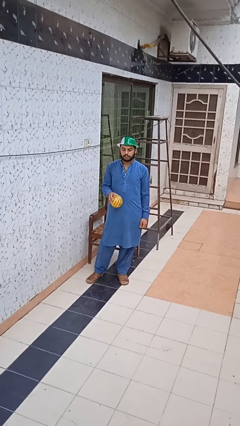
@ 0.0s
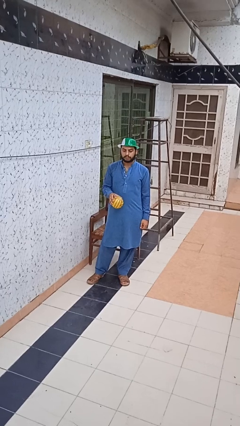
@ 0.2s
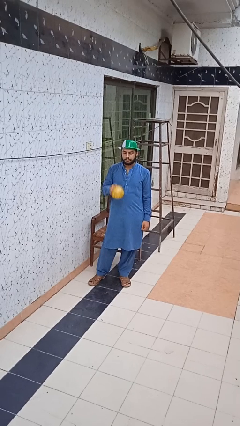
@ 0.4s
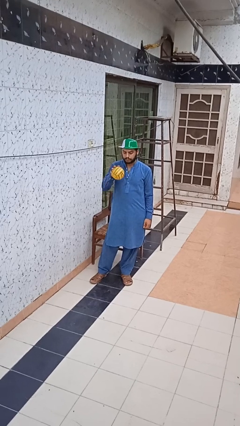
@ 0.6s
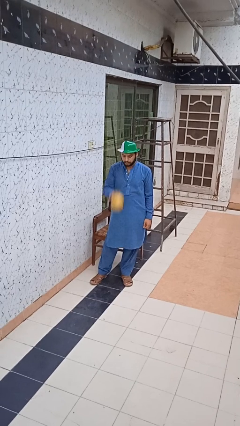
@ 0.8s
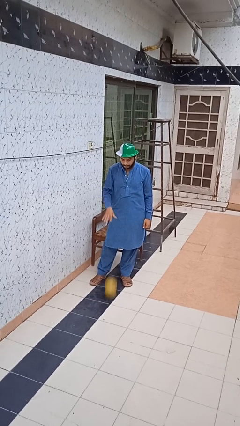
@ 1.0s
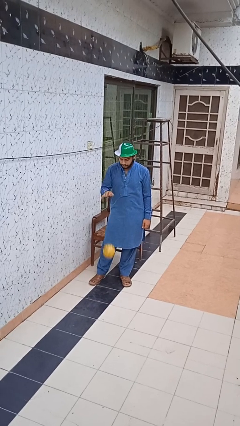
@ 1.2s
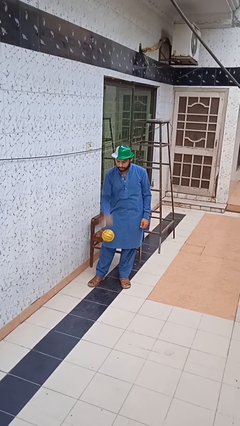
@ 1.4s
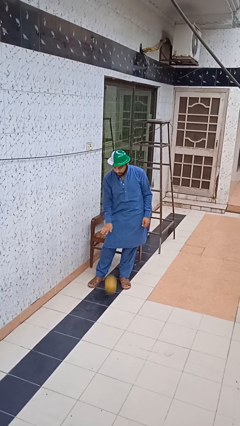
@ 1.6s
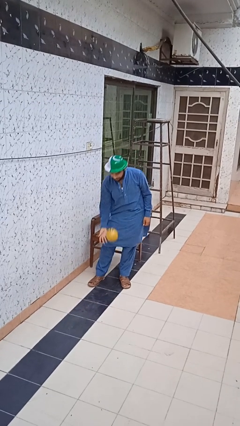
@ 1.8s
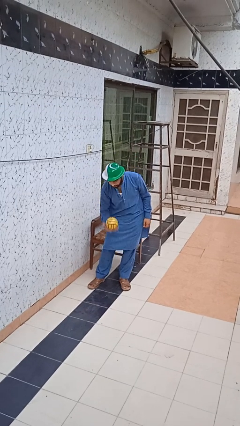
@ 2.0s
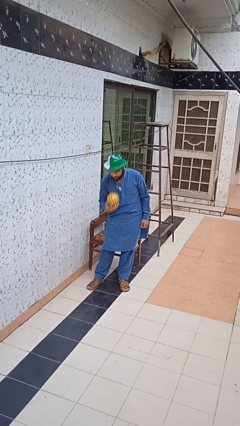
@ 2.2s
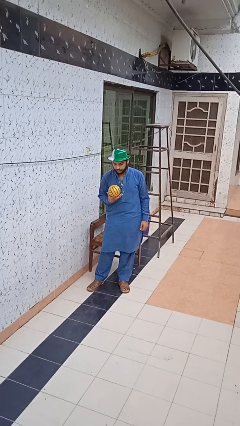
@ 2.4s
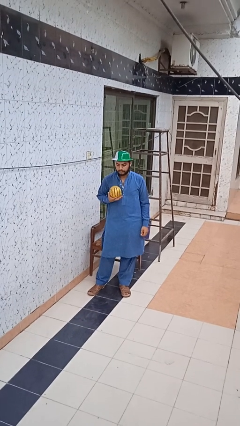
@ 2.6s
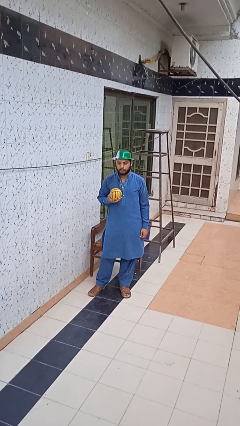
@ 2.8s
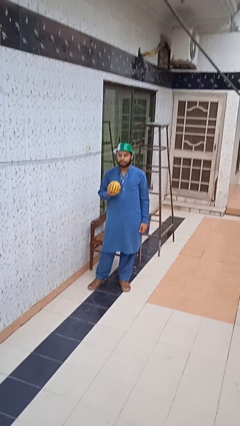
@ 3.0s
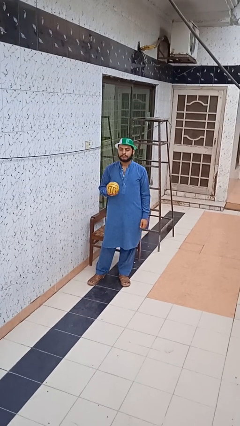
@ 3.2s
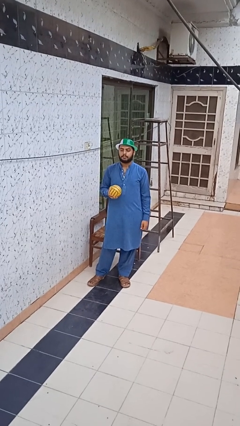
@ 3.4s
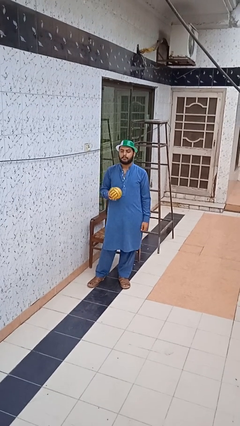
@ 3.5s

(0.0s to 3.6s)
person bounces ball on floor

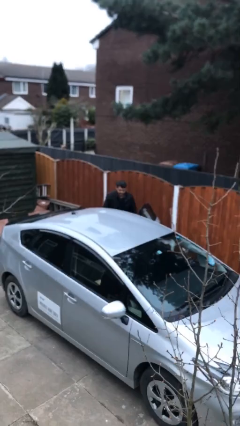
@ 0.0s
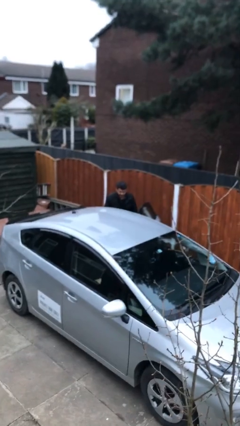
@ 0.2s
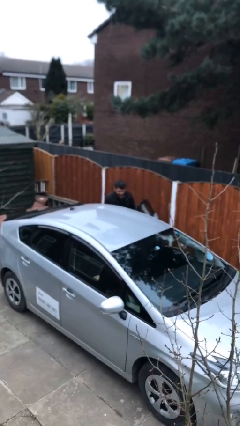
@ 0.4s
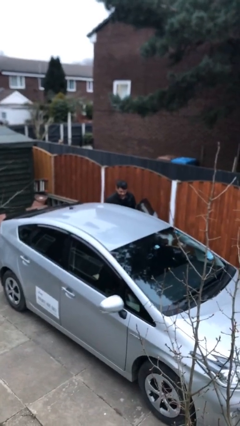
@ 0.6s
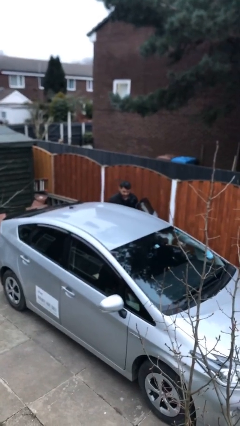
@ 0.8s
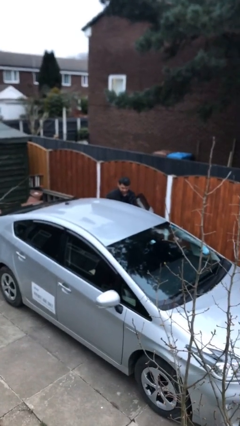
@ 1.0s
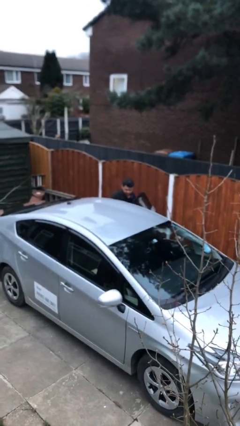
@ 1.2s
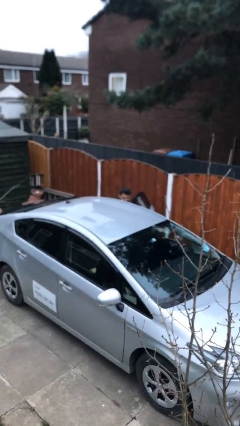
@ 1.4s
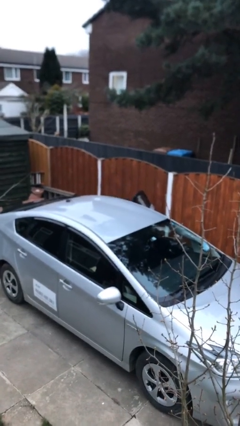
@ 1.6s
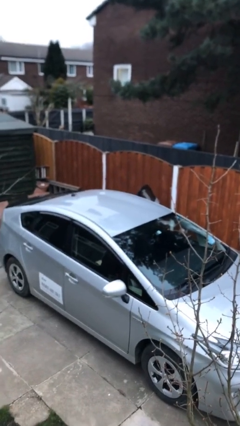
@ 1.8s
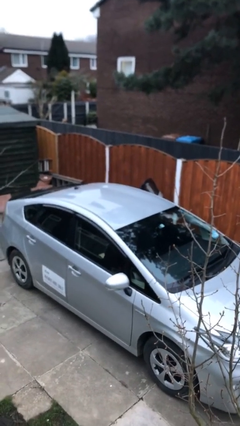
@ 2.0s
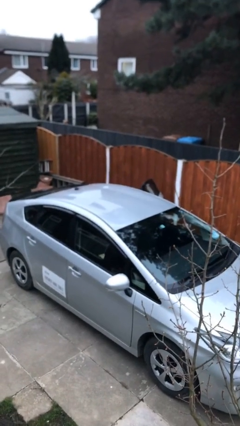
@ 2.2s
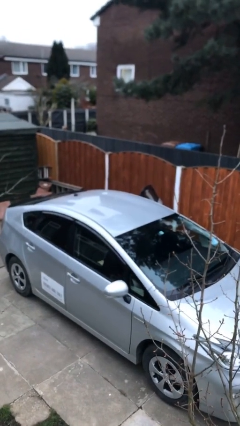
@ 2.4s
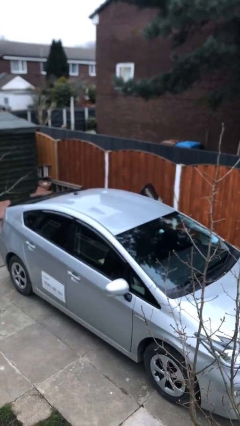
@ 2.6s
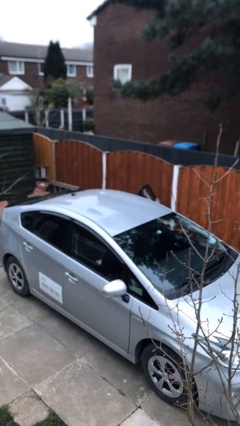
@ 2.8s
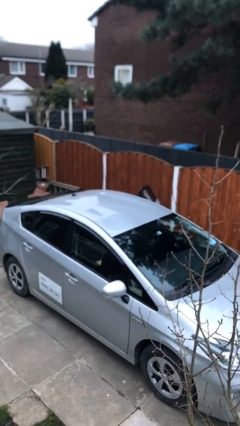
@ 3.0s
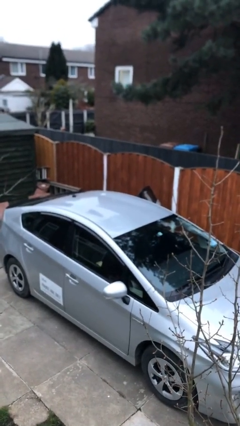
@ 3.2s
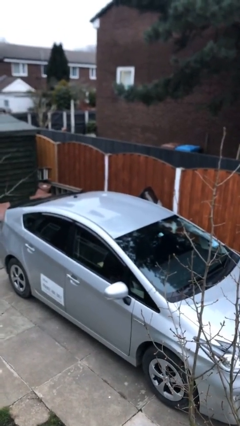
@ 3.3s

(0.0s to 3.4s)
person enters car

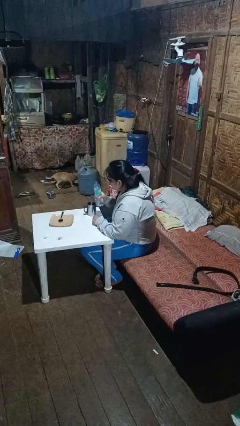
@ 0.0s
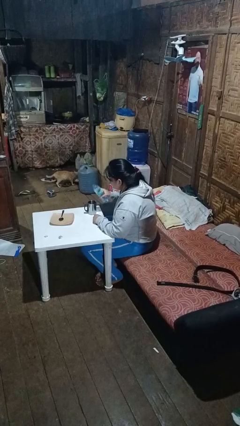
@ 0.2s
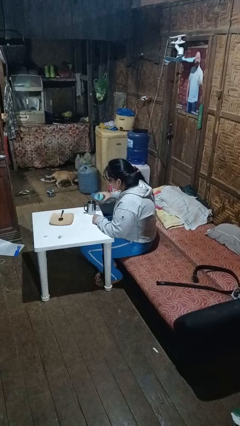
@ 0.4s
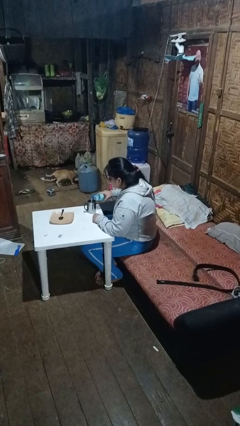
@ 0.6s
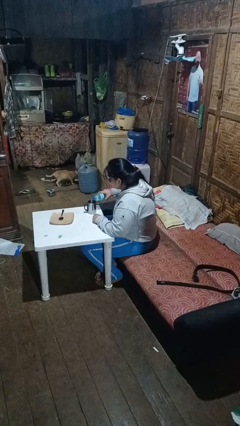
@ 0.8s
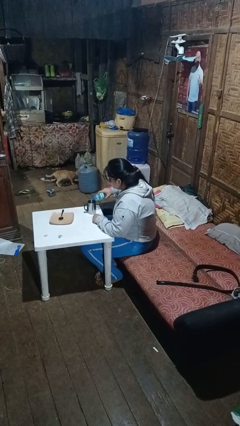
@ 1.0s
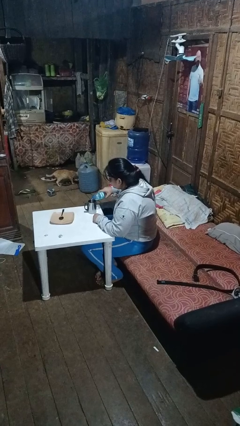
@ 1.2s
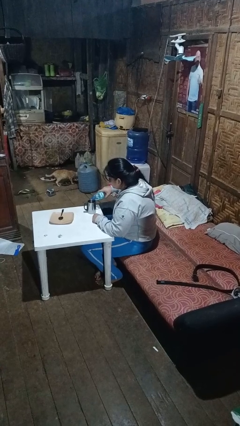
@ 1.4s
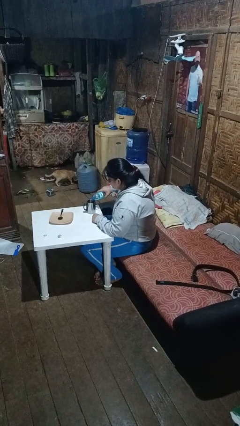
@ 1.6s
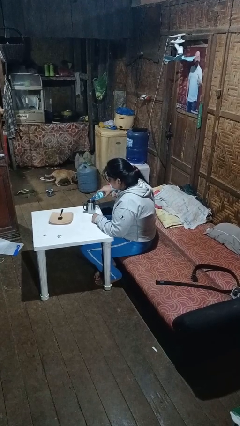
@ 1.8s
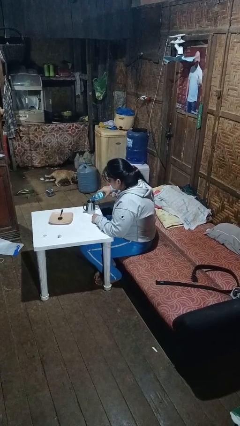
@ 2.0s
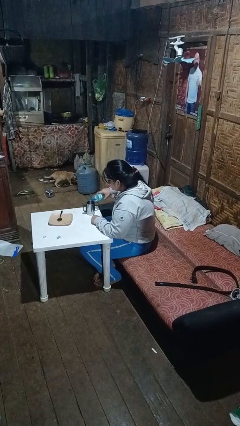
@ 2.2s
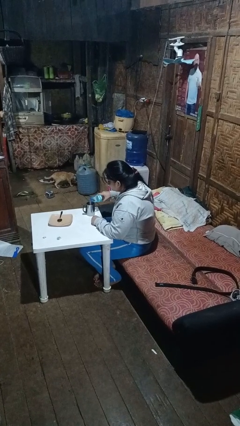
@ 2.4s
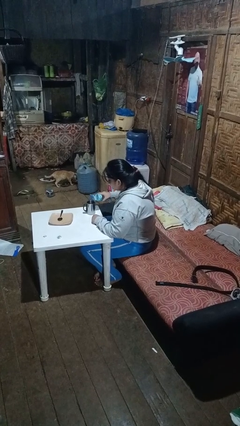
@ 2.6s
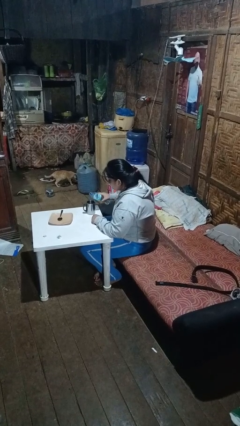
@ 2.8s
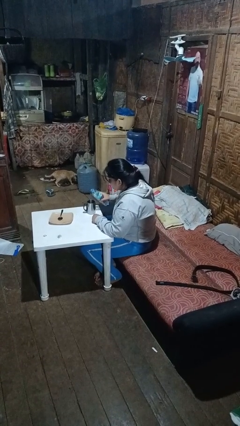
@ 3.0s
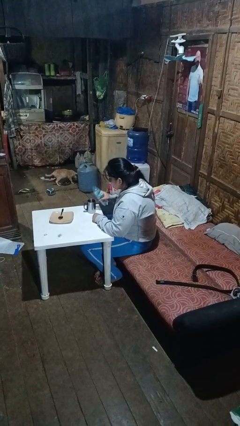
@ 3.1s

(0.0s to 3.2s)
person pours liquid into cup

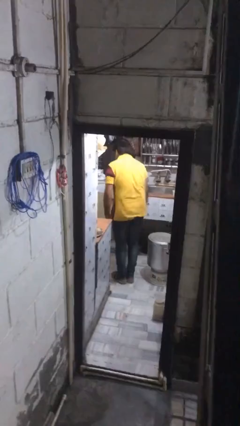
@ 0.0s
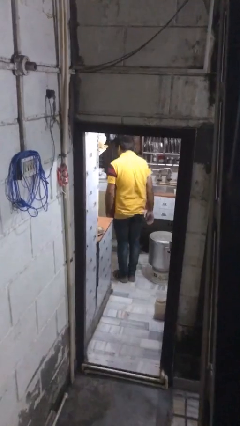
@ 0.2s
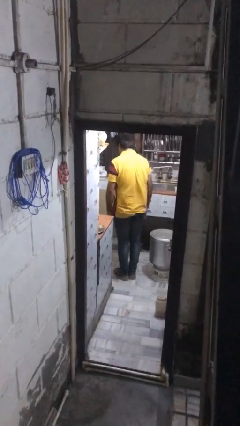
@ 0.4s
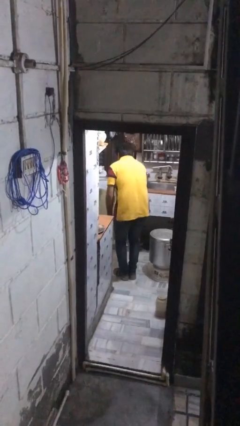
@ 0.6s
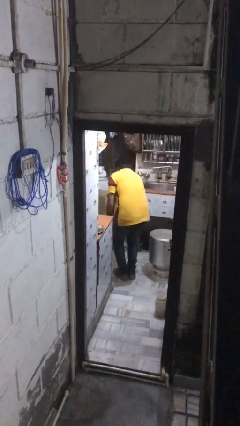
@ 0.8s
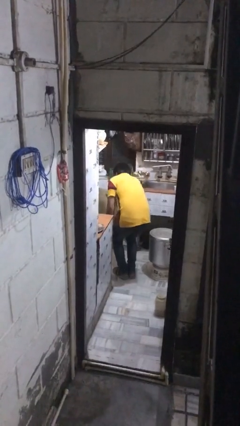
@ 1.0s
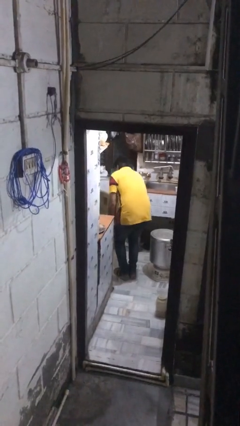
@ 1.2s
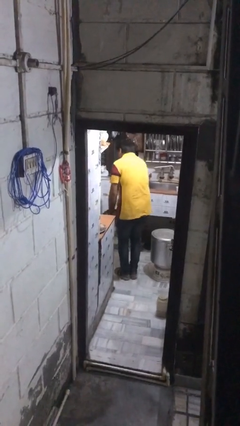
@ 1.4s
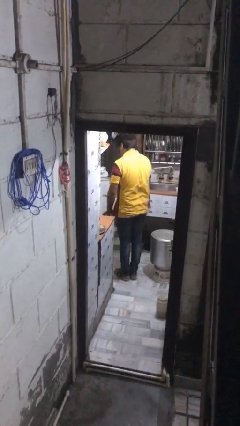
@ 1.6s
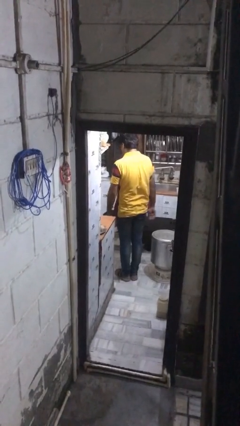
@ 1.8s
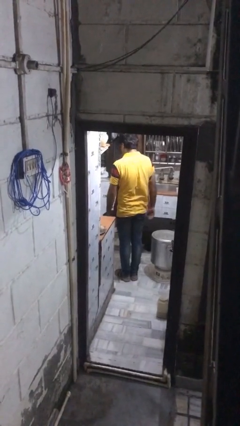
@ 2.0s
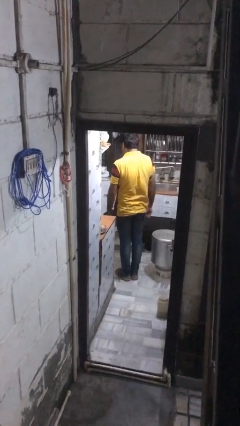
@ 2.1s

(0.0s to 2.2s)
person closes kitchen drawer

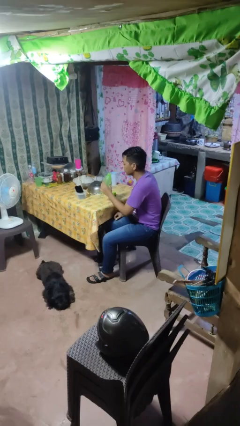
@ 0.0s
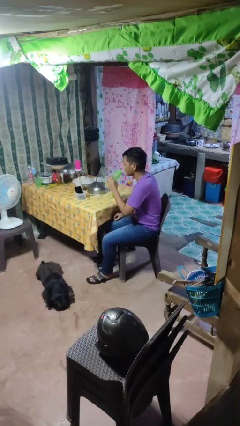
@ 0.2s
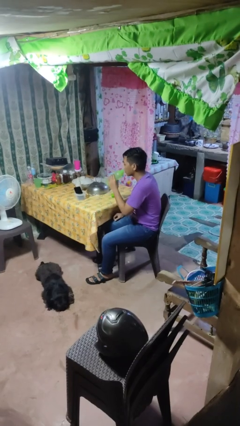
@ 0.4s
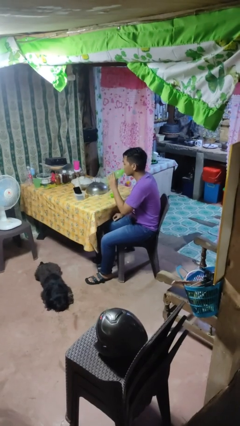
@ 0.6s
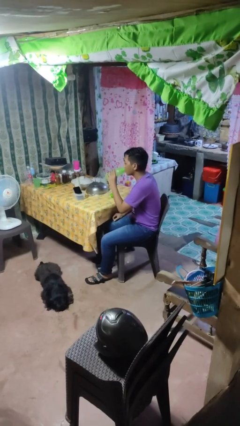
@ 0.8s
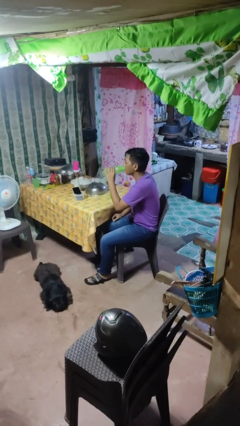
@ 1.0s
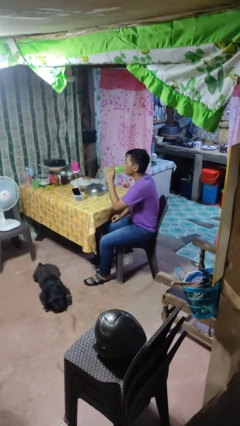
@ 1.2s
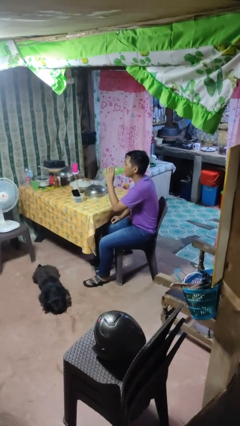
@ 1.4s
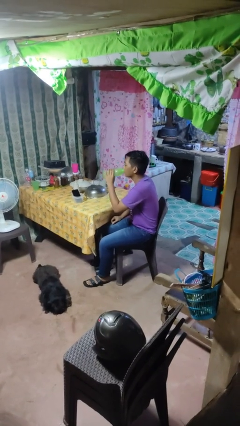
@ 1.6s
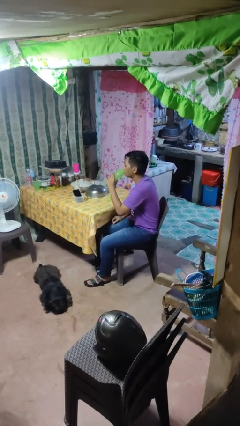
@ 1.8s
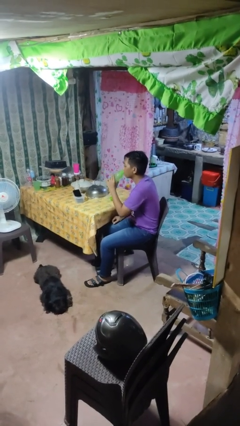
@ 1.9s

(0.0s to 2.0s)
person drinks from bottle

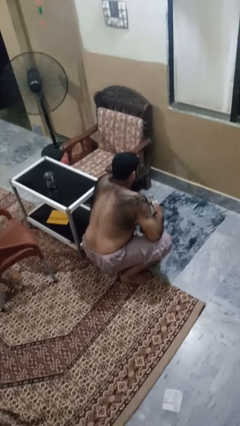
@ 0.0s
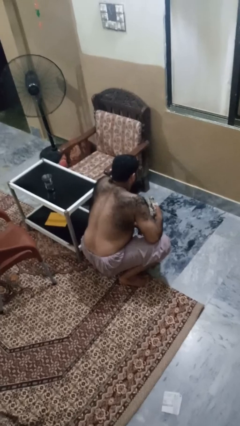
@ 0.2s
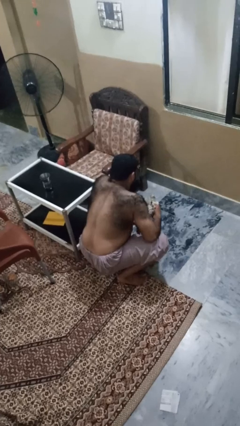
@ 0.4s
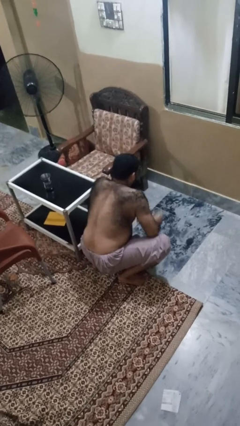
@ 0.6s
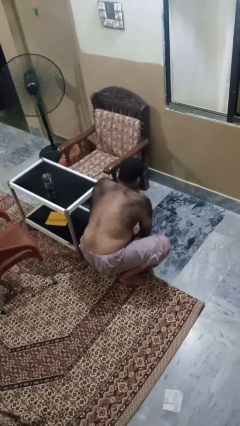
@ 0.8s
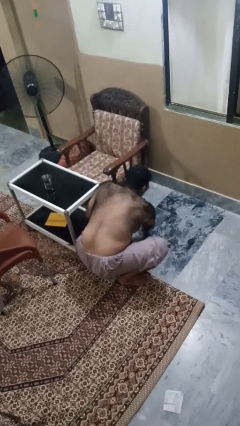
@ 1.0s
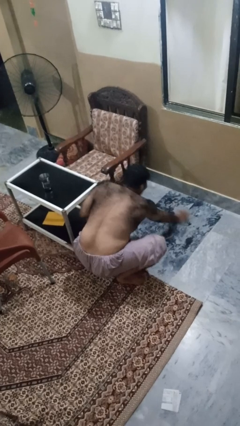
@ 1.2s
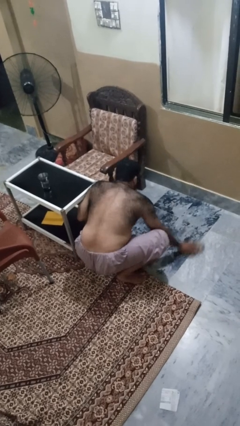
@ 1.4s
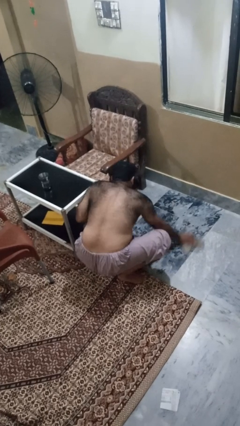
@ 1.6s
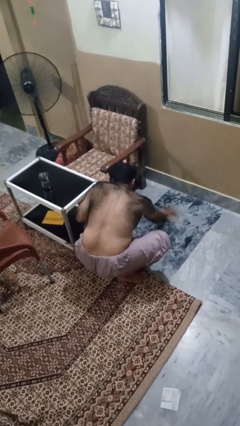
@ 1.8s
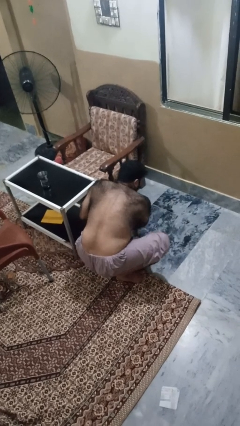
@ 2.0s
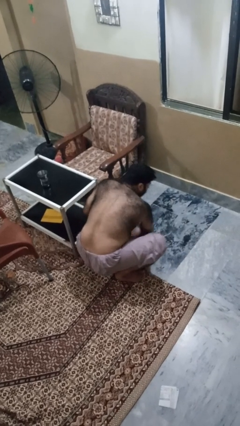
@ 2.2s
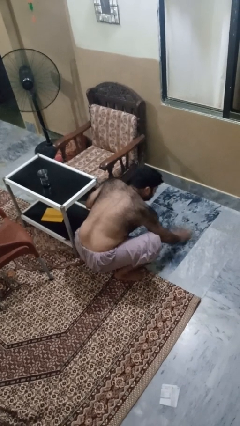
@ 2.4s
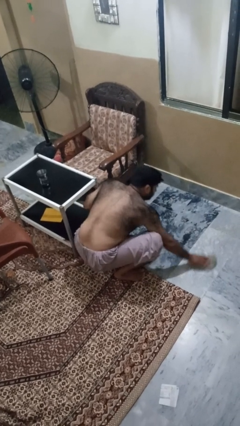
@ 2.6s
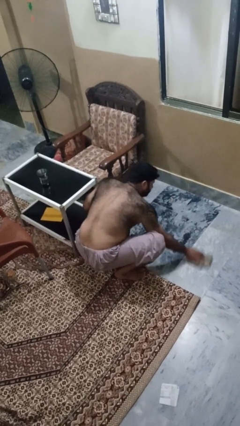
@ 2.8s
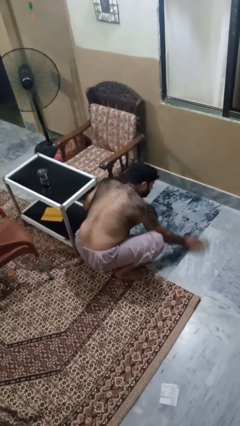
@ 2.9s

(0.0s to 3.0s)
person mops
